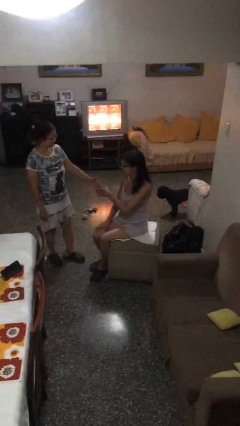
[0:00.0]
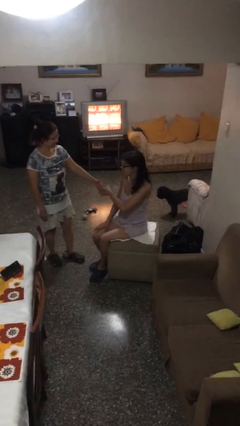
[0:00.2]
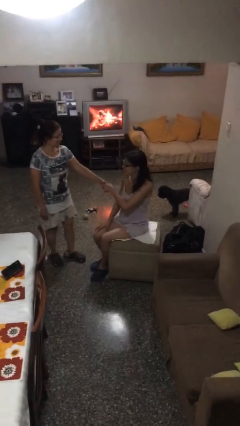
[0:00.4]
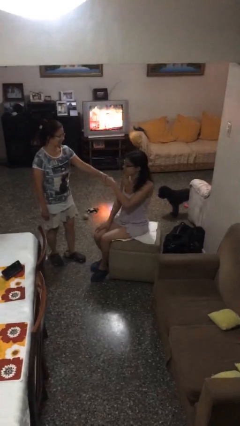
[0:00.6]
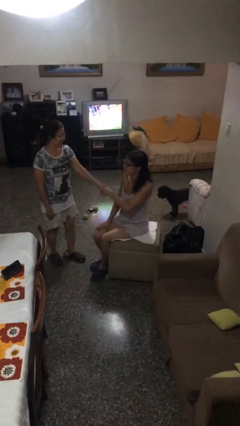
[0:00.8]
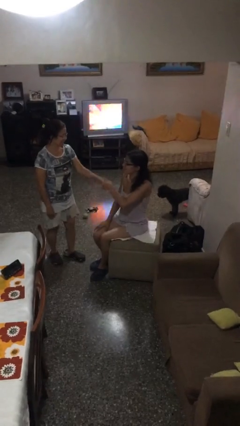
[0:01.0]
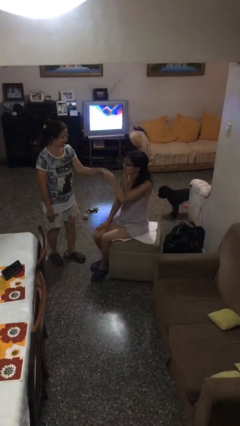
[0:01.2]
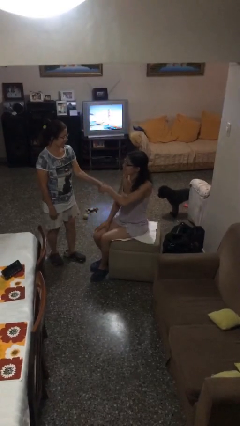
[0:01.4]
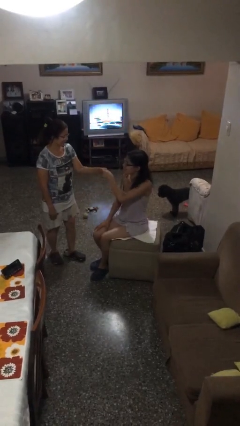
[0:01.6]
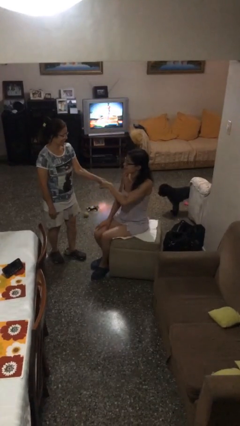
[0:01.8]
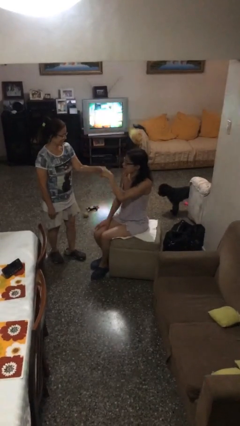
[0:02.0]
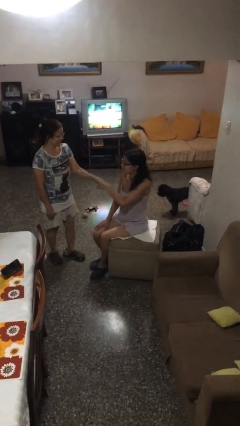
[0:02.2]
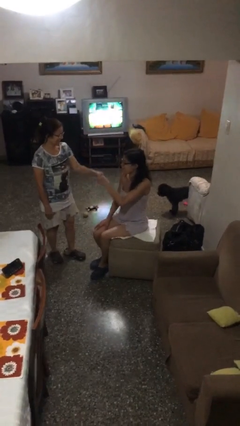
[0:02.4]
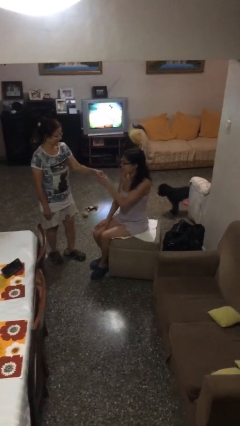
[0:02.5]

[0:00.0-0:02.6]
person shakes hand

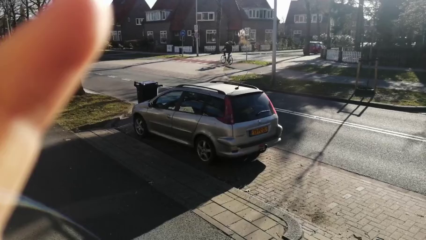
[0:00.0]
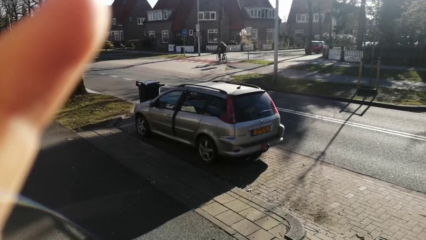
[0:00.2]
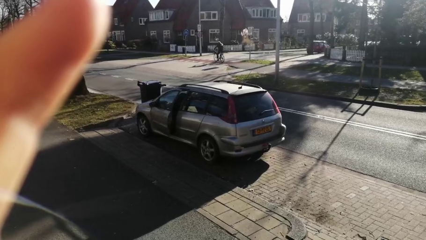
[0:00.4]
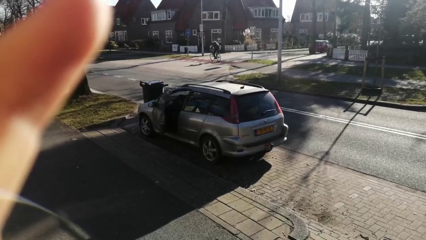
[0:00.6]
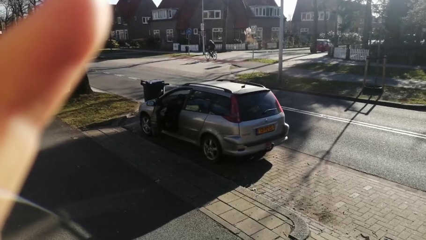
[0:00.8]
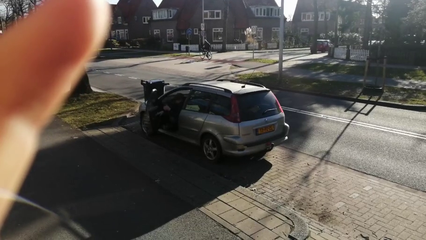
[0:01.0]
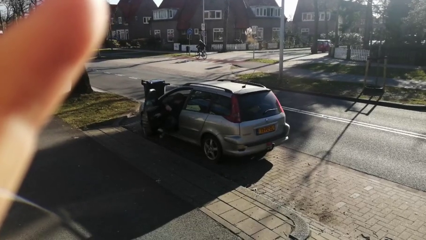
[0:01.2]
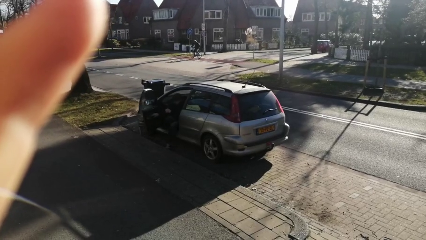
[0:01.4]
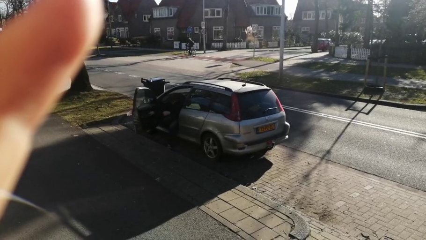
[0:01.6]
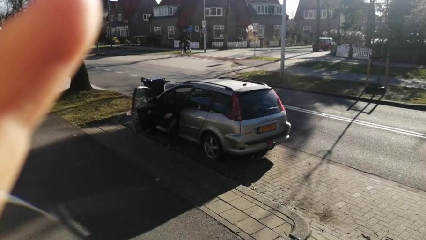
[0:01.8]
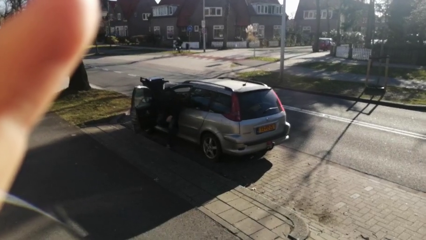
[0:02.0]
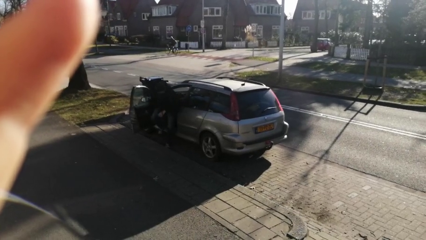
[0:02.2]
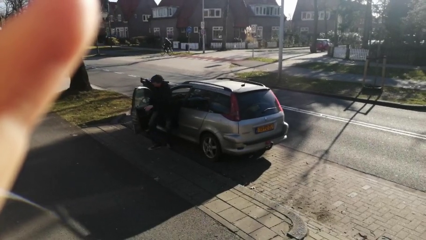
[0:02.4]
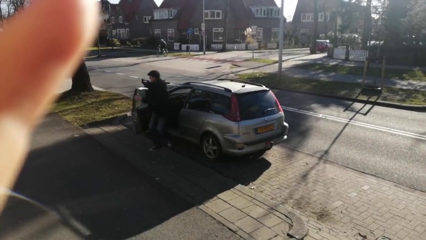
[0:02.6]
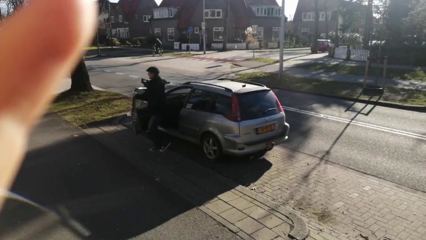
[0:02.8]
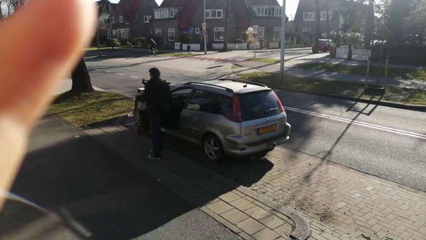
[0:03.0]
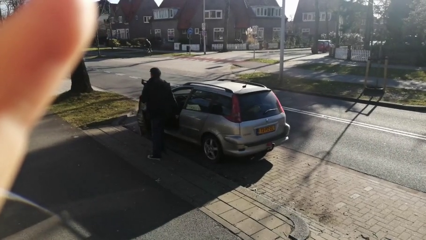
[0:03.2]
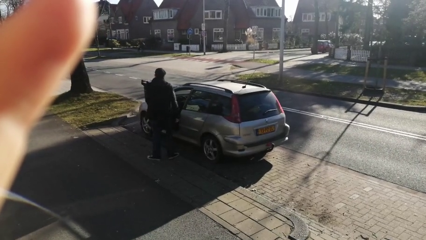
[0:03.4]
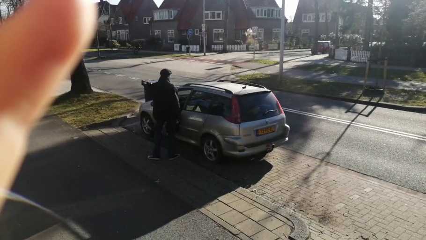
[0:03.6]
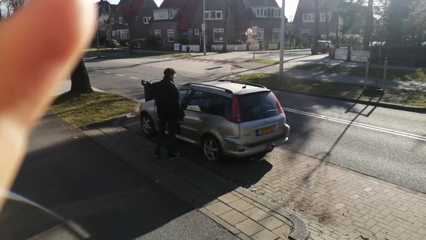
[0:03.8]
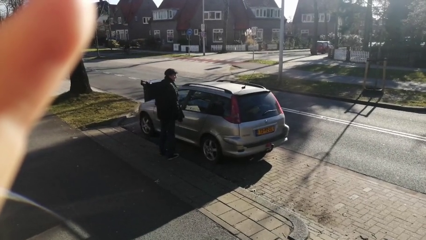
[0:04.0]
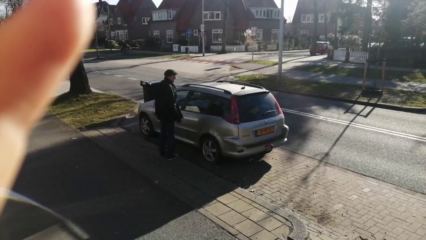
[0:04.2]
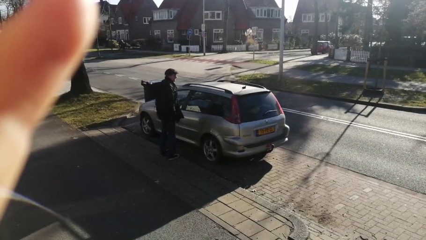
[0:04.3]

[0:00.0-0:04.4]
car drops off person

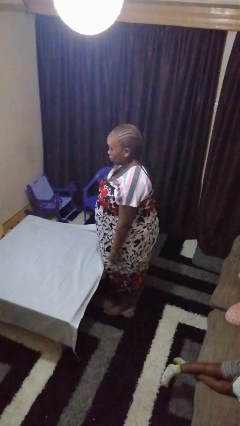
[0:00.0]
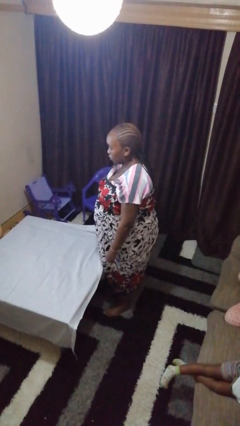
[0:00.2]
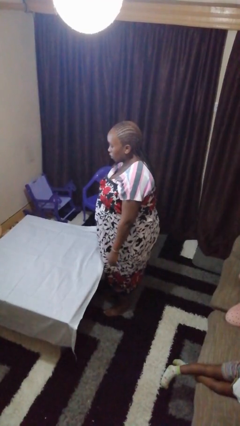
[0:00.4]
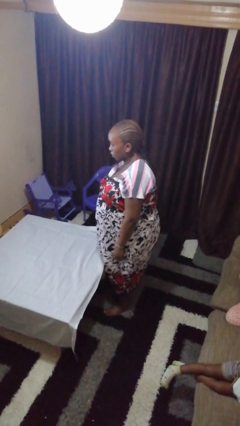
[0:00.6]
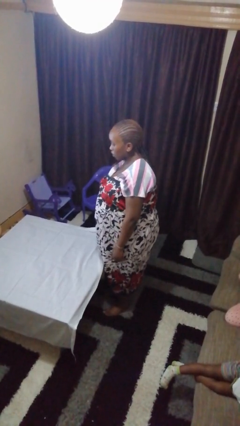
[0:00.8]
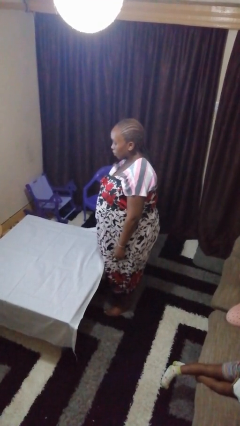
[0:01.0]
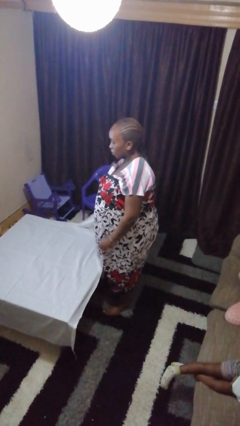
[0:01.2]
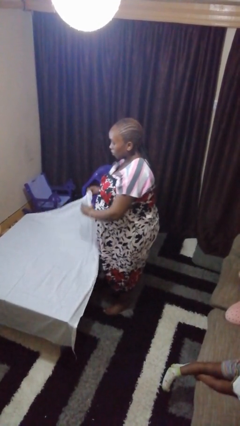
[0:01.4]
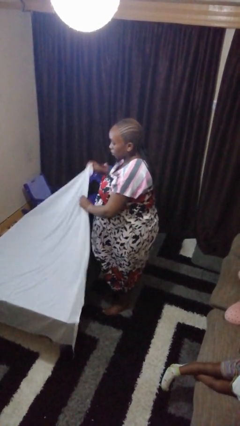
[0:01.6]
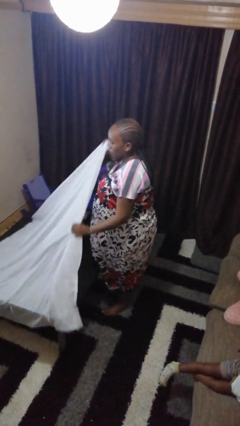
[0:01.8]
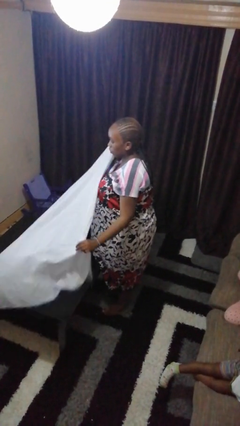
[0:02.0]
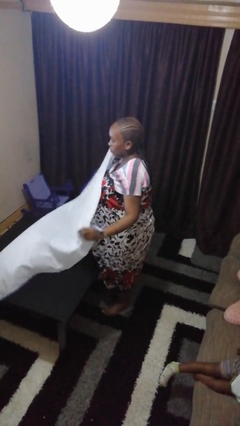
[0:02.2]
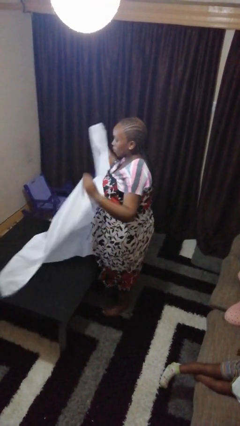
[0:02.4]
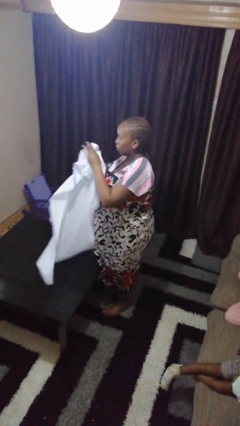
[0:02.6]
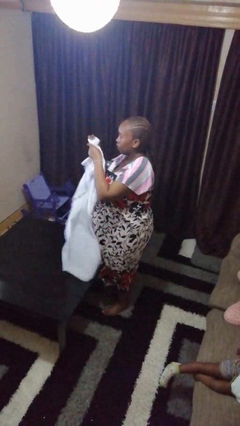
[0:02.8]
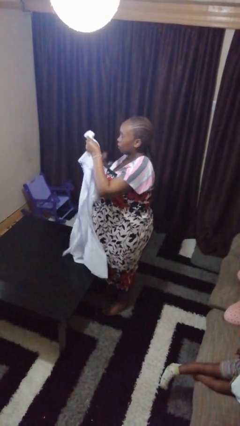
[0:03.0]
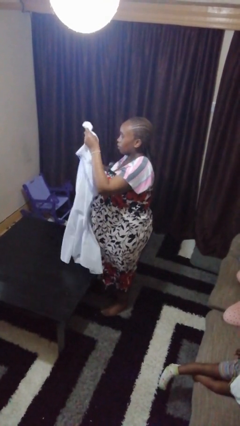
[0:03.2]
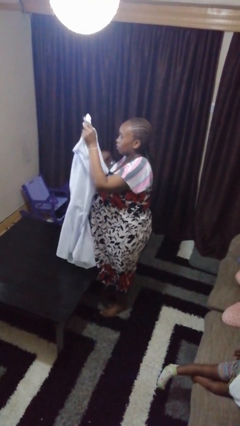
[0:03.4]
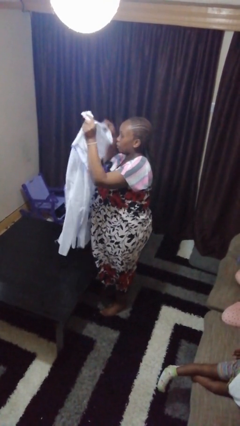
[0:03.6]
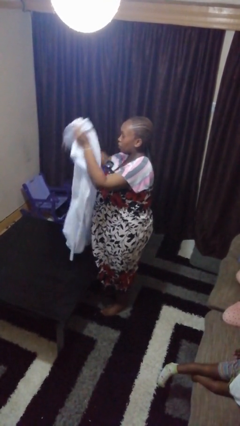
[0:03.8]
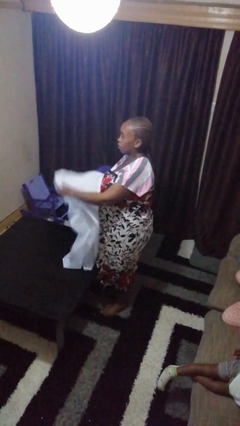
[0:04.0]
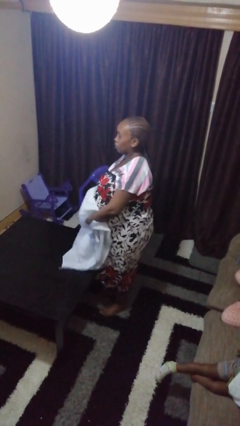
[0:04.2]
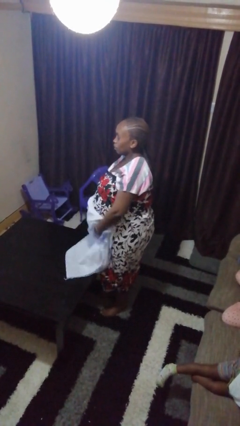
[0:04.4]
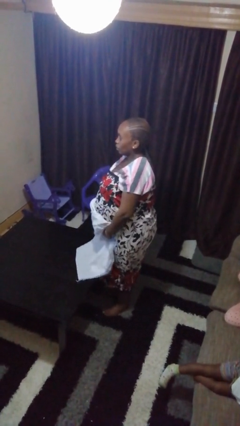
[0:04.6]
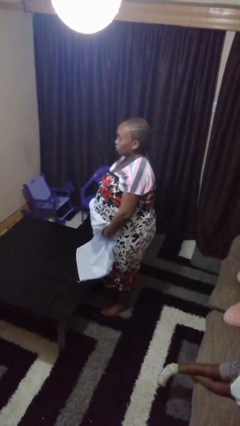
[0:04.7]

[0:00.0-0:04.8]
person folds tablecloth

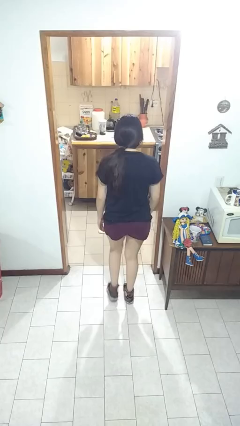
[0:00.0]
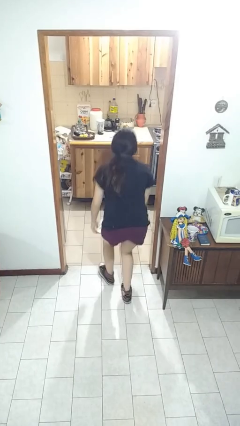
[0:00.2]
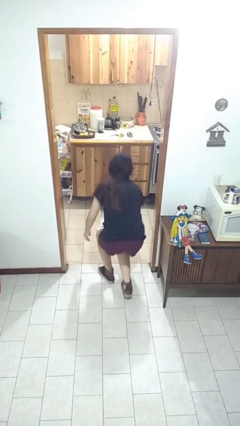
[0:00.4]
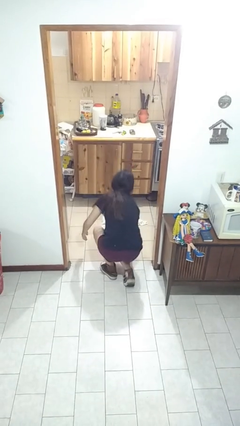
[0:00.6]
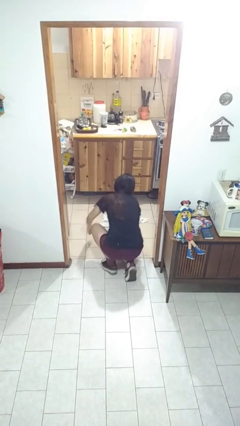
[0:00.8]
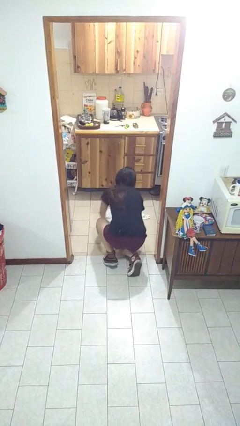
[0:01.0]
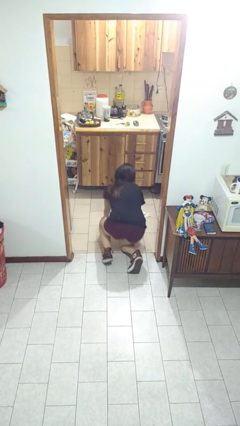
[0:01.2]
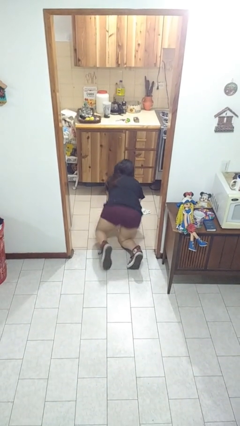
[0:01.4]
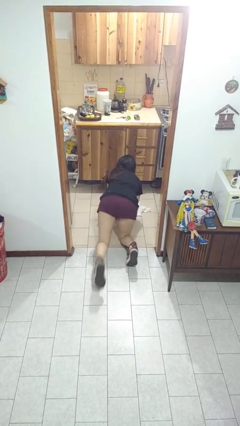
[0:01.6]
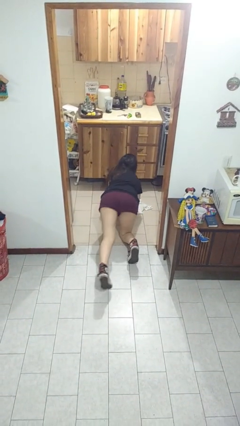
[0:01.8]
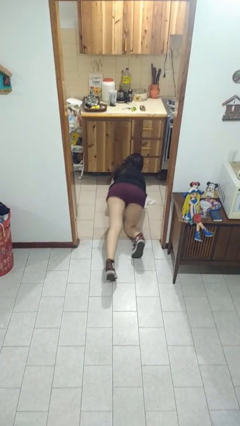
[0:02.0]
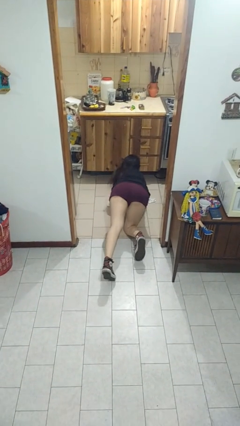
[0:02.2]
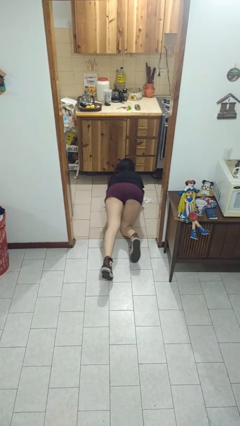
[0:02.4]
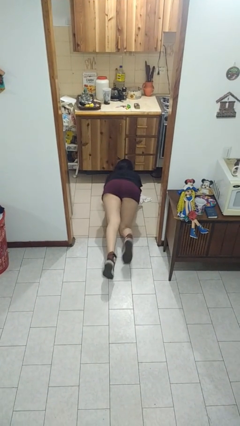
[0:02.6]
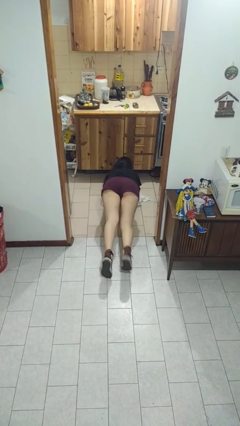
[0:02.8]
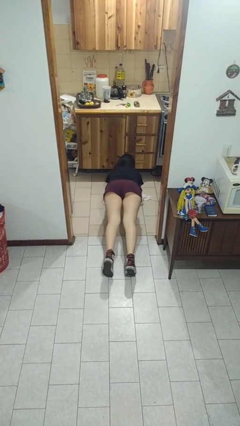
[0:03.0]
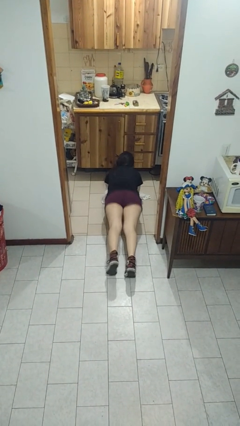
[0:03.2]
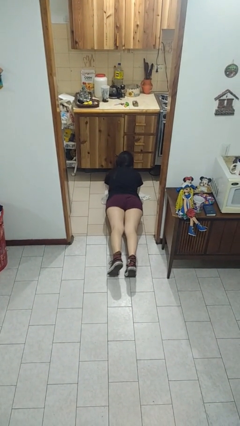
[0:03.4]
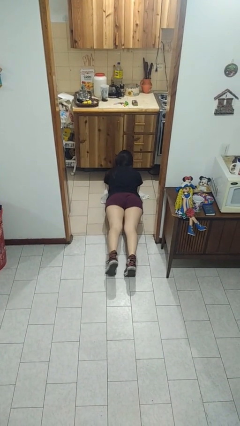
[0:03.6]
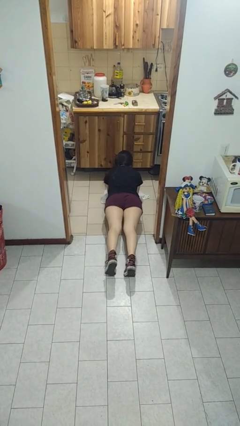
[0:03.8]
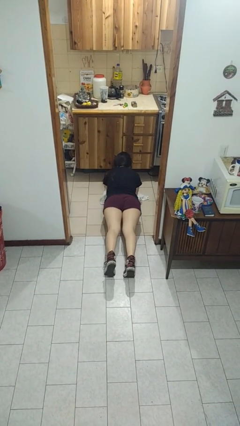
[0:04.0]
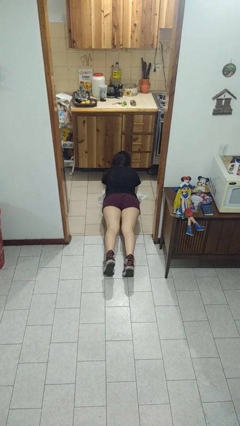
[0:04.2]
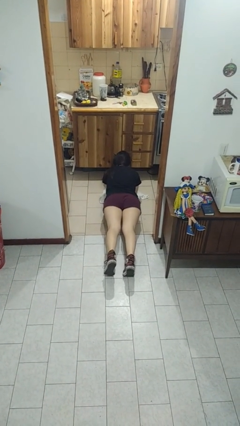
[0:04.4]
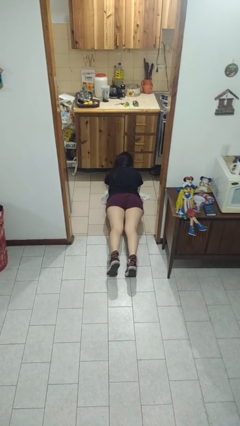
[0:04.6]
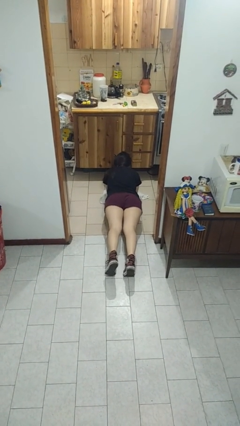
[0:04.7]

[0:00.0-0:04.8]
person exercises with plank

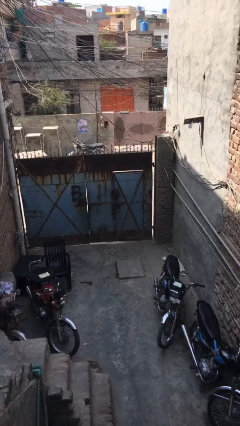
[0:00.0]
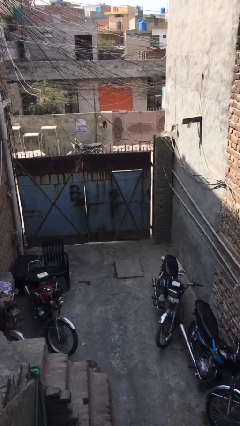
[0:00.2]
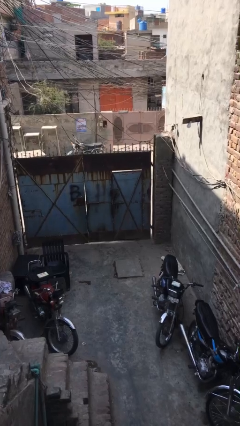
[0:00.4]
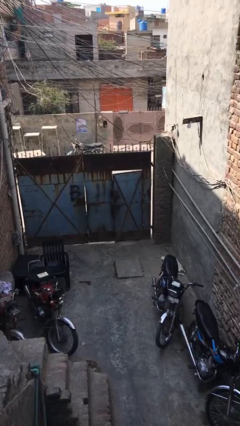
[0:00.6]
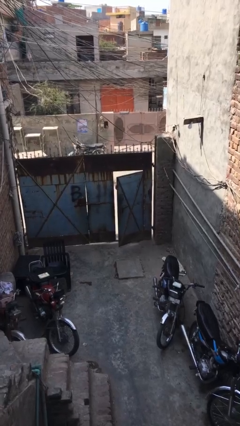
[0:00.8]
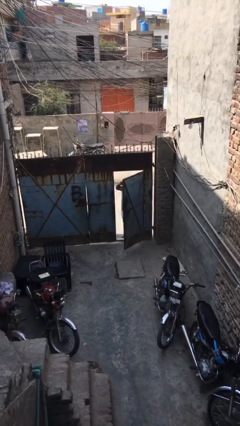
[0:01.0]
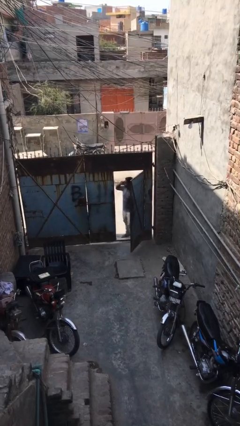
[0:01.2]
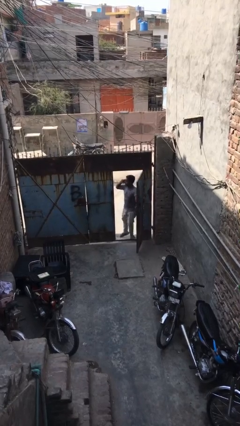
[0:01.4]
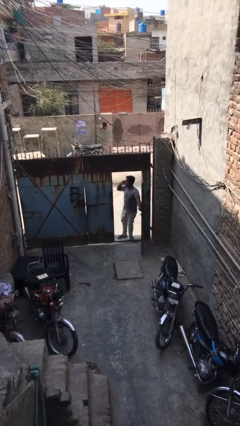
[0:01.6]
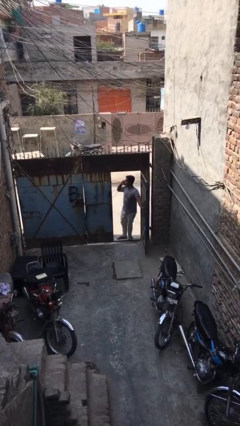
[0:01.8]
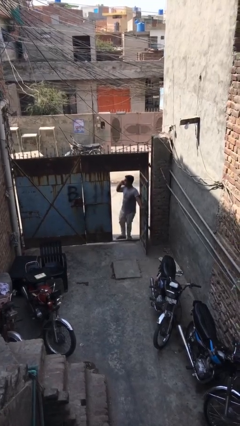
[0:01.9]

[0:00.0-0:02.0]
person opens facility door
